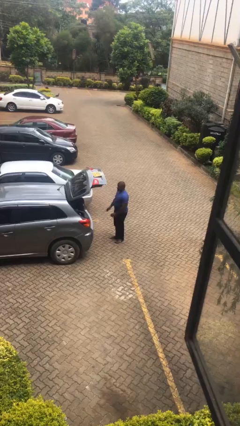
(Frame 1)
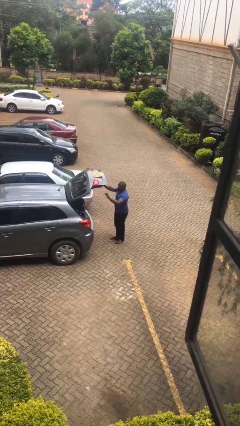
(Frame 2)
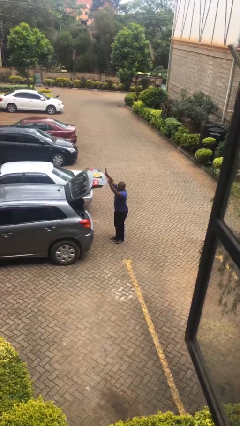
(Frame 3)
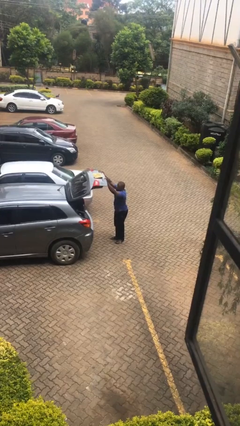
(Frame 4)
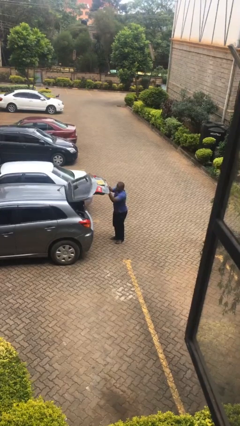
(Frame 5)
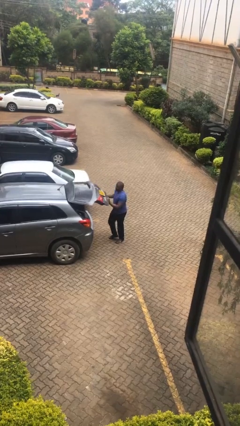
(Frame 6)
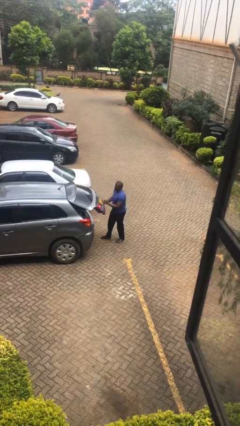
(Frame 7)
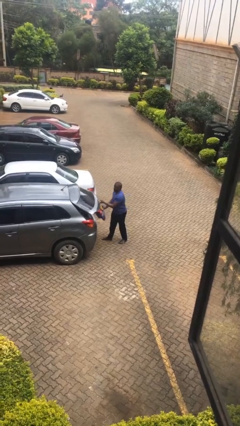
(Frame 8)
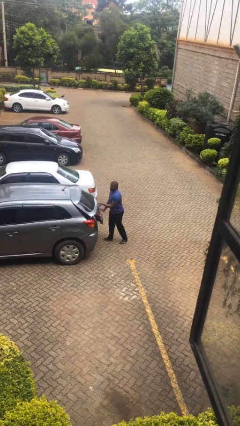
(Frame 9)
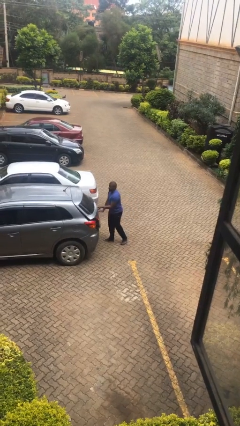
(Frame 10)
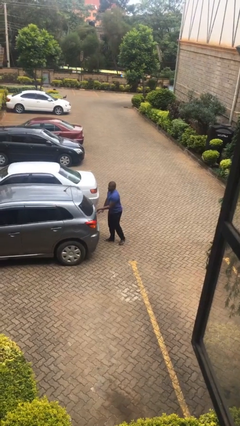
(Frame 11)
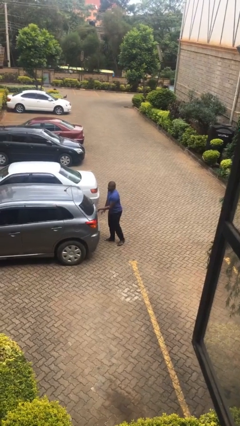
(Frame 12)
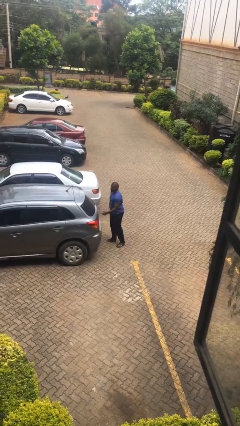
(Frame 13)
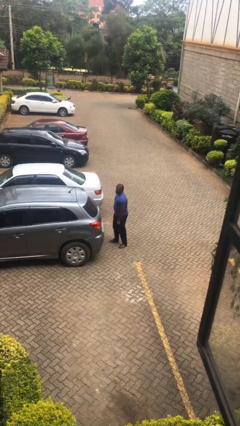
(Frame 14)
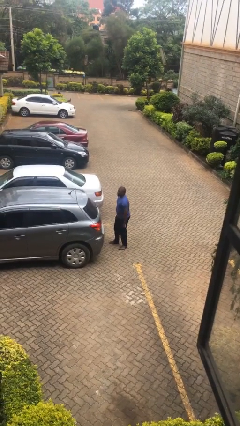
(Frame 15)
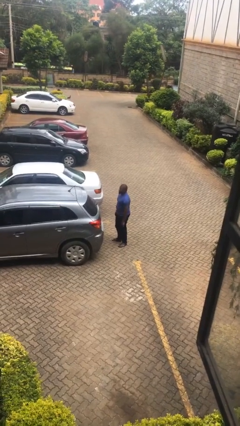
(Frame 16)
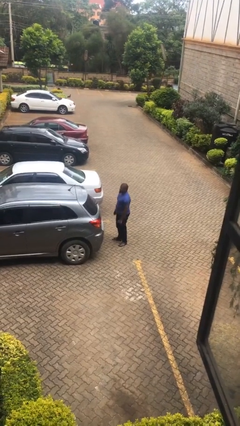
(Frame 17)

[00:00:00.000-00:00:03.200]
person closes car trunk

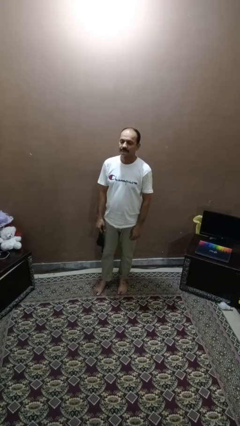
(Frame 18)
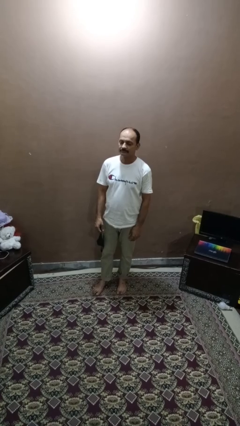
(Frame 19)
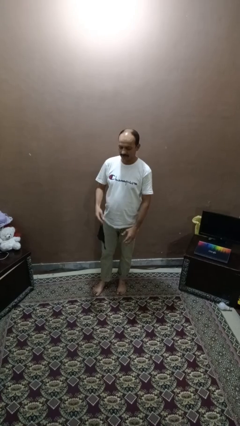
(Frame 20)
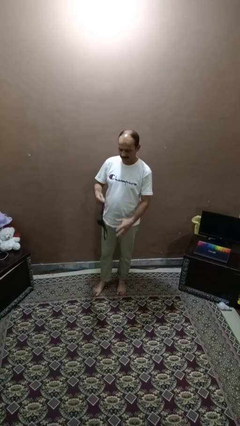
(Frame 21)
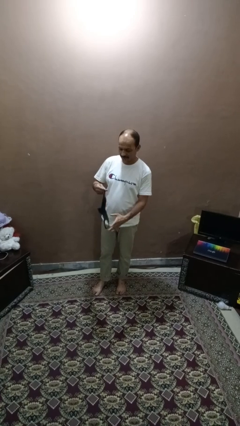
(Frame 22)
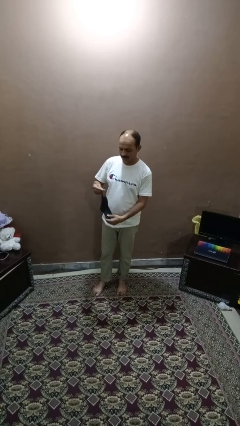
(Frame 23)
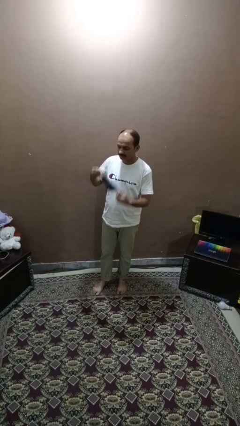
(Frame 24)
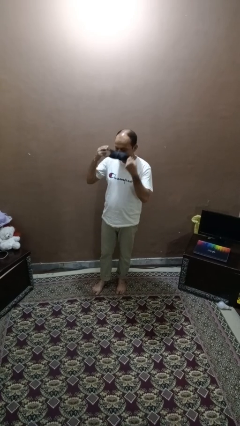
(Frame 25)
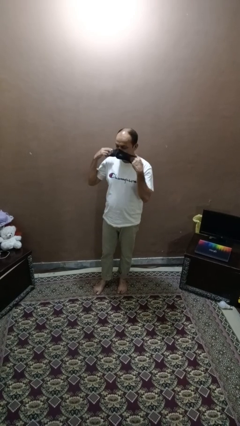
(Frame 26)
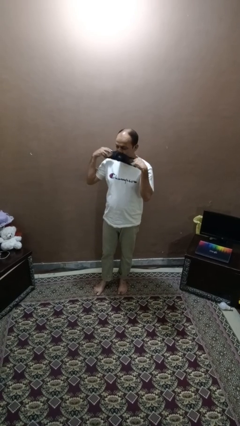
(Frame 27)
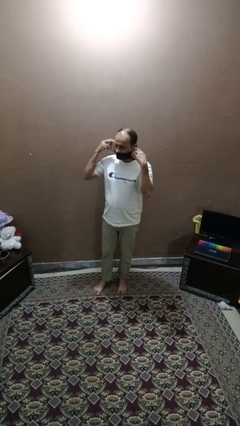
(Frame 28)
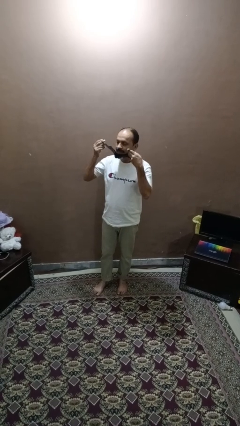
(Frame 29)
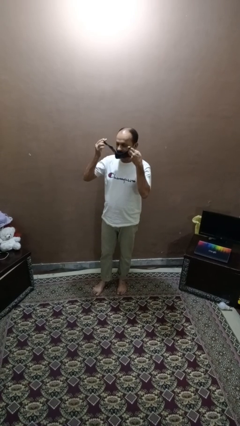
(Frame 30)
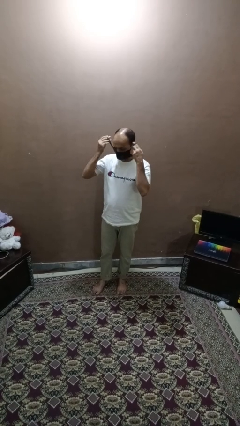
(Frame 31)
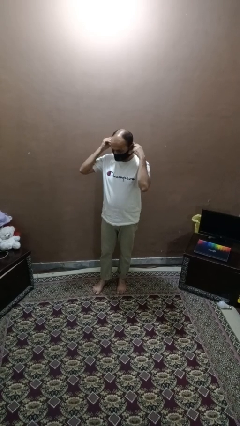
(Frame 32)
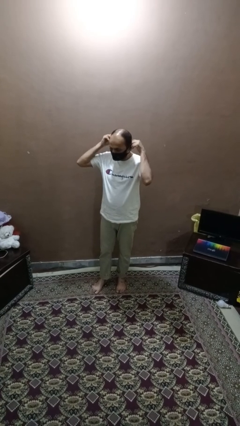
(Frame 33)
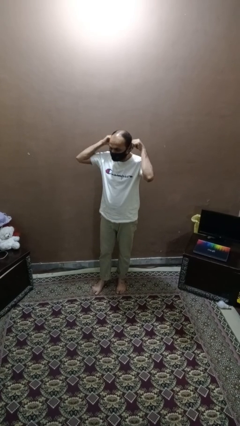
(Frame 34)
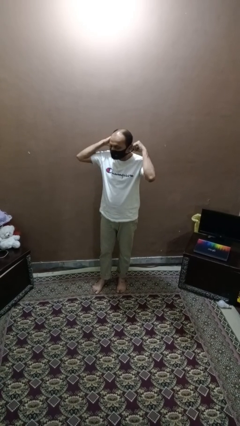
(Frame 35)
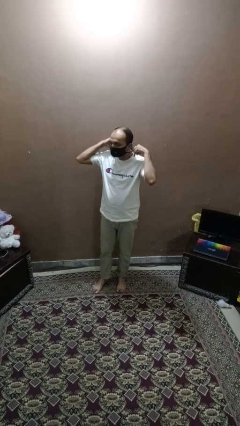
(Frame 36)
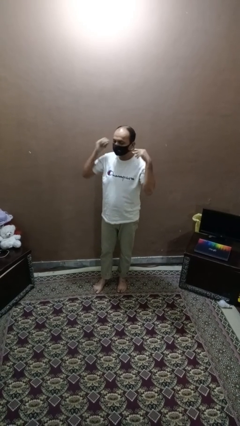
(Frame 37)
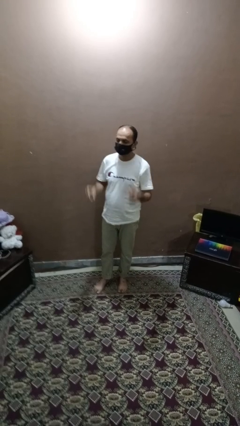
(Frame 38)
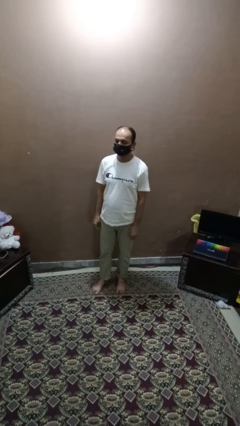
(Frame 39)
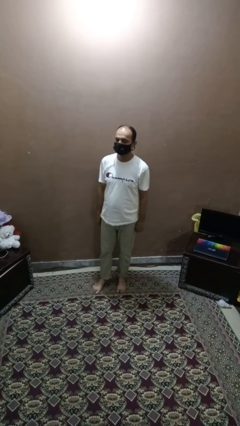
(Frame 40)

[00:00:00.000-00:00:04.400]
person puts on facemask

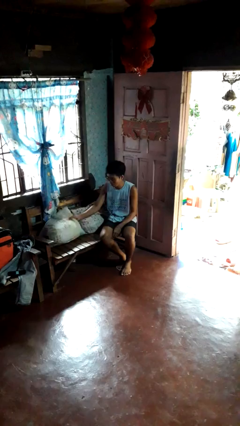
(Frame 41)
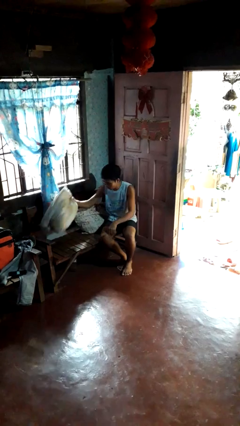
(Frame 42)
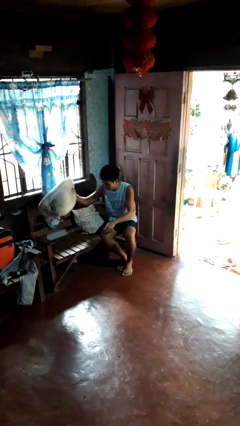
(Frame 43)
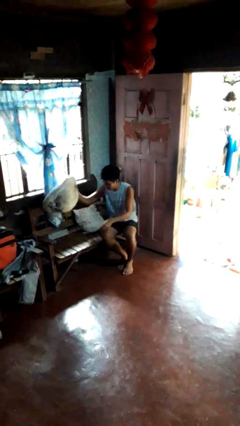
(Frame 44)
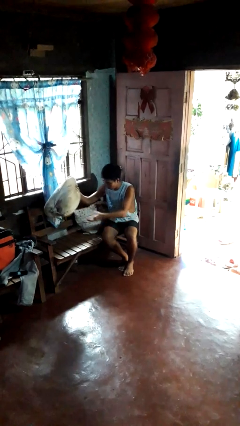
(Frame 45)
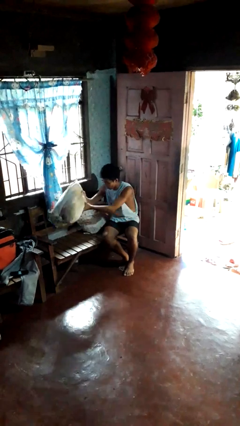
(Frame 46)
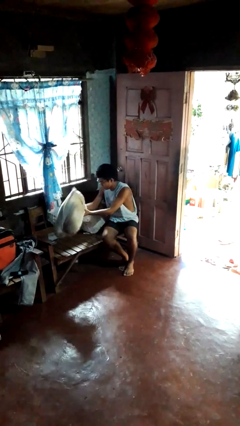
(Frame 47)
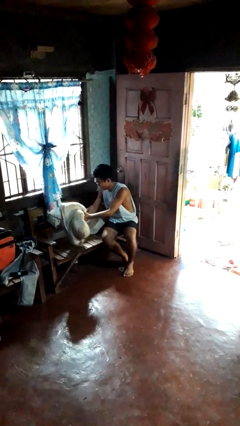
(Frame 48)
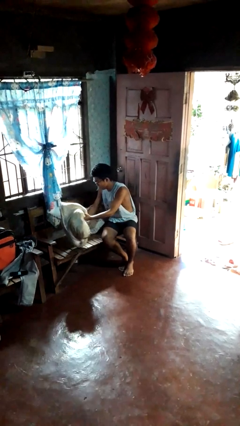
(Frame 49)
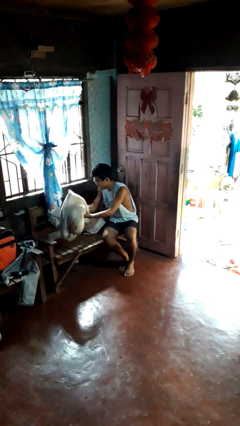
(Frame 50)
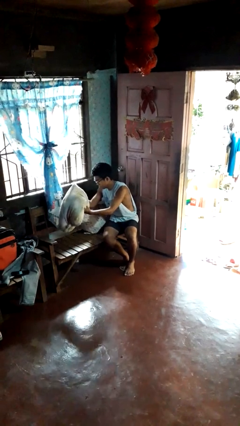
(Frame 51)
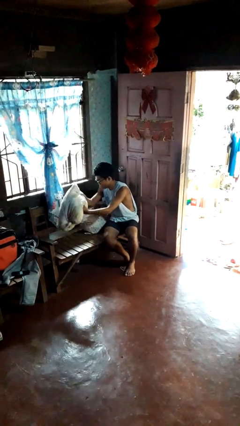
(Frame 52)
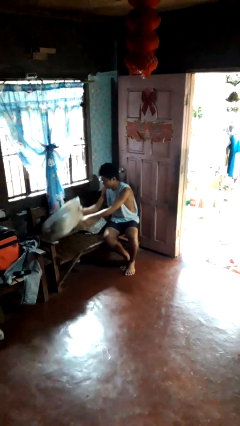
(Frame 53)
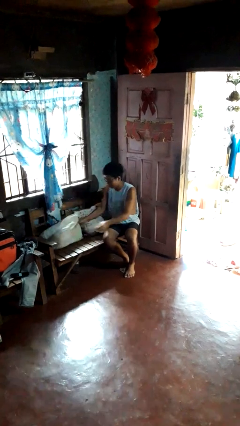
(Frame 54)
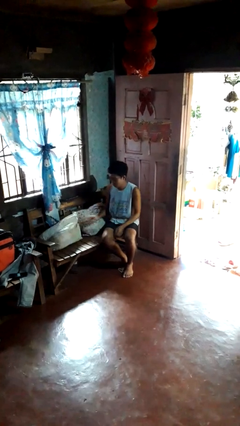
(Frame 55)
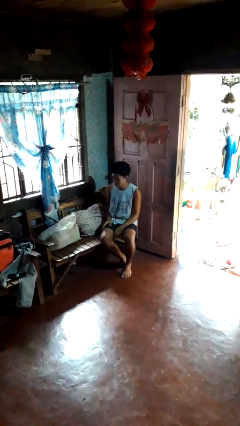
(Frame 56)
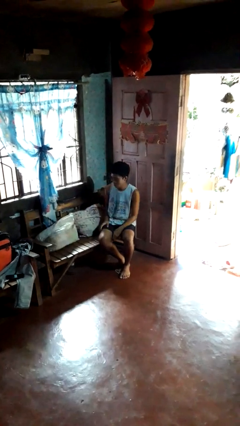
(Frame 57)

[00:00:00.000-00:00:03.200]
person searches in couch

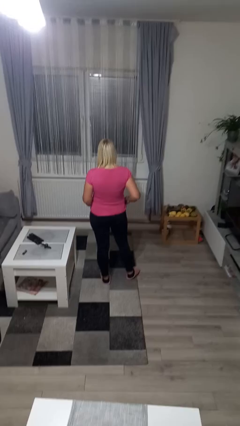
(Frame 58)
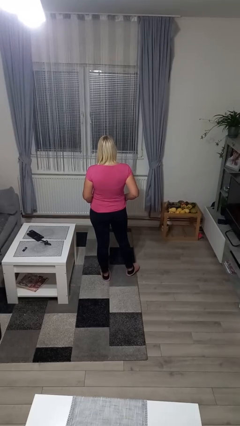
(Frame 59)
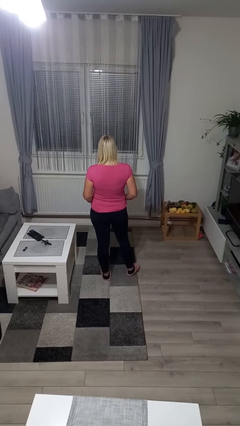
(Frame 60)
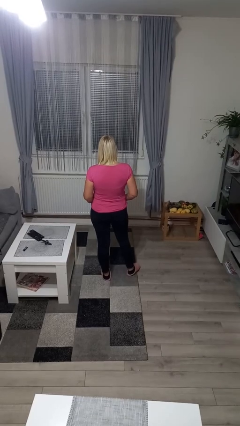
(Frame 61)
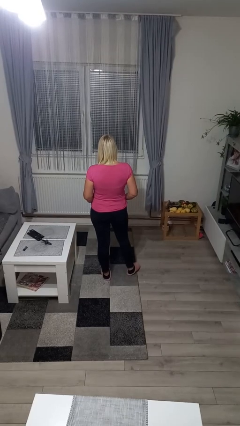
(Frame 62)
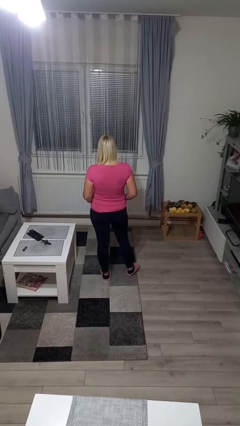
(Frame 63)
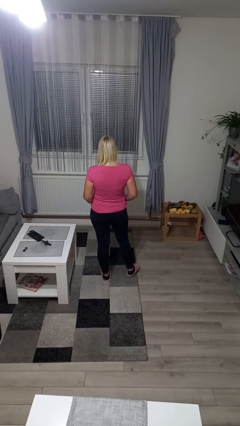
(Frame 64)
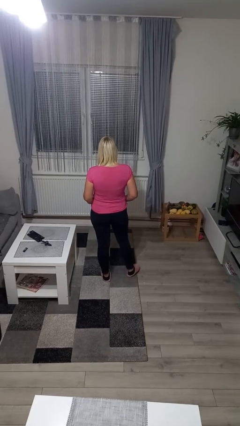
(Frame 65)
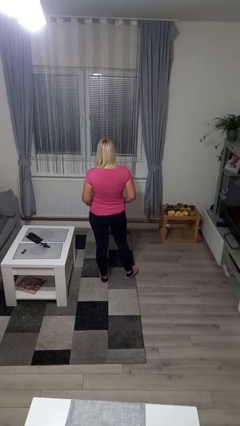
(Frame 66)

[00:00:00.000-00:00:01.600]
person puts hands in back pockets

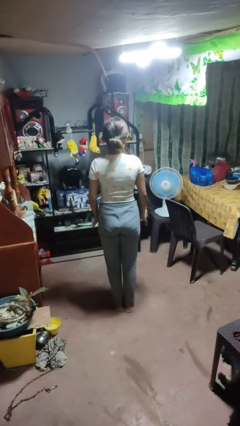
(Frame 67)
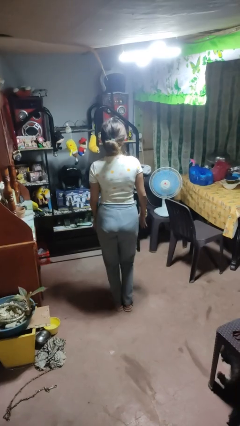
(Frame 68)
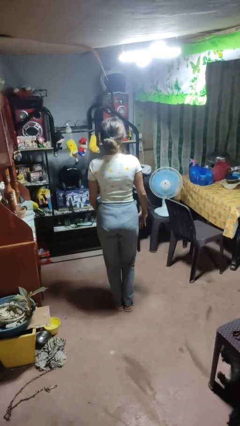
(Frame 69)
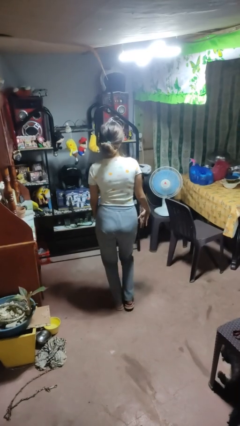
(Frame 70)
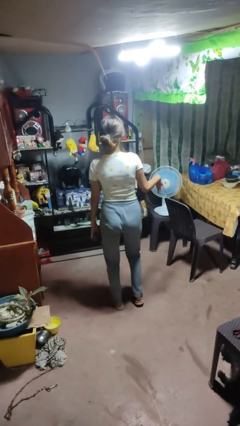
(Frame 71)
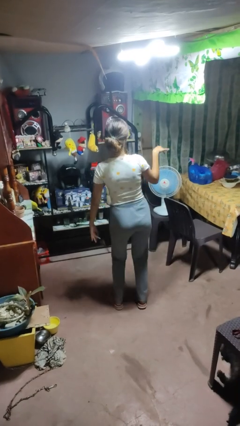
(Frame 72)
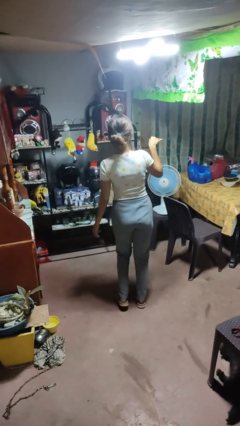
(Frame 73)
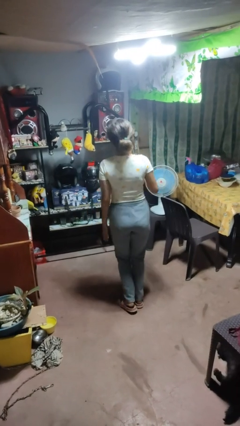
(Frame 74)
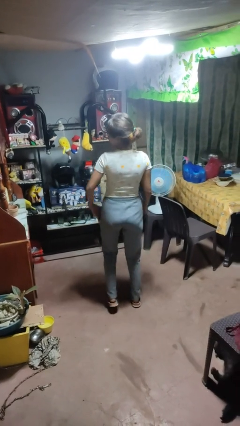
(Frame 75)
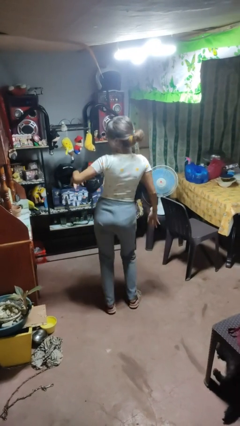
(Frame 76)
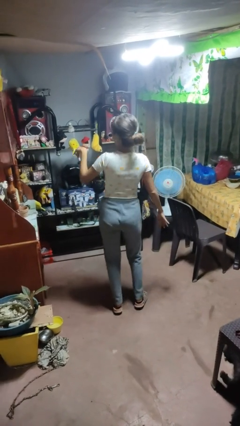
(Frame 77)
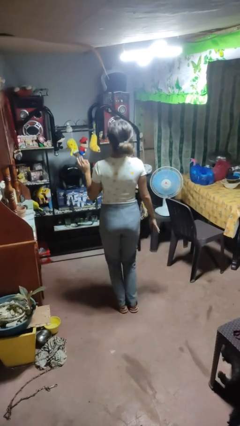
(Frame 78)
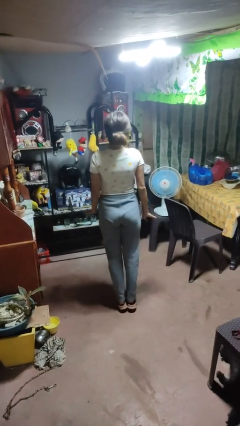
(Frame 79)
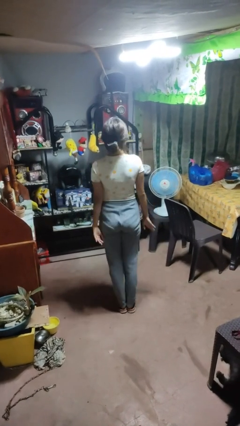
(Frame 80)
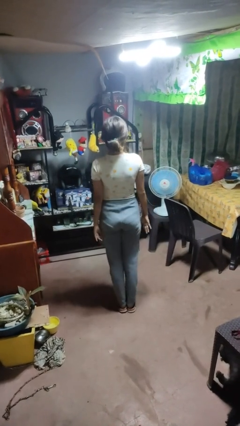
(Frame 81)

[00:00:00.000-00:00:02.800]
person dances in place

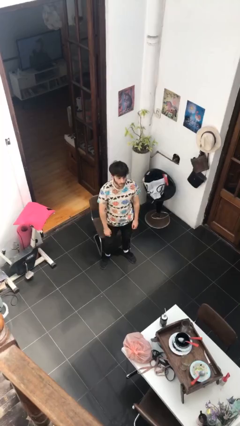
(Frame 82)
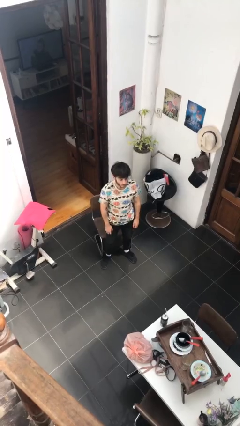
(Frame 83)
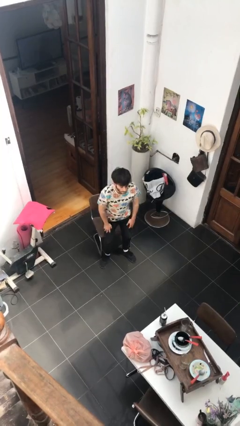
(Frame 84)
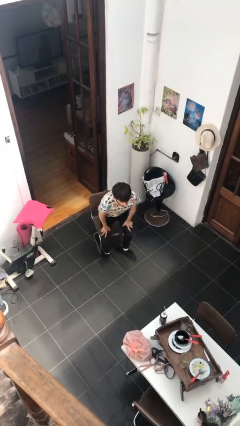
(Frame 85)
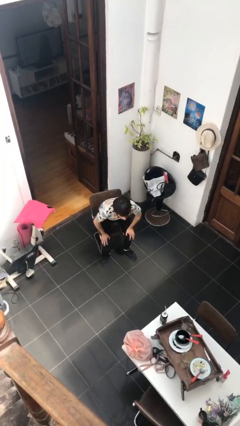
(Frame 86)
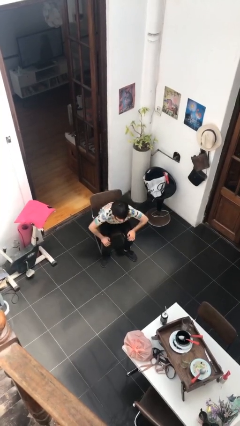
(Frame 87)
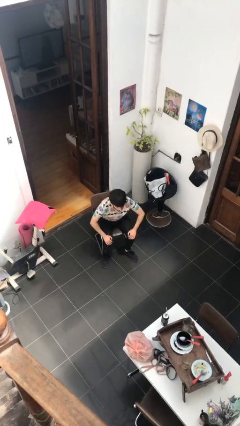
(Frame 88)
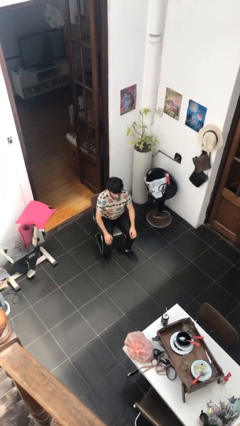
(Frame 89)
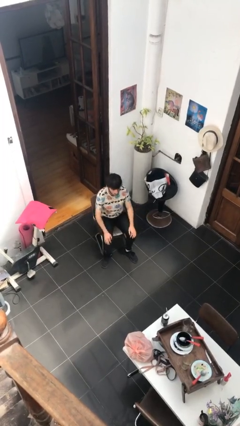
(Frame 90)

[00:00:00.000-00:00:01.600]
person sits down

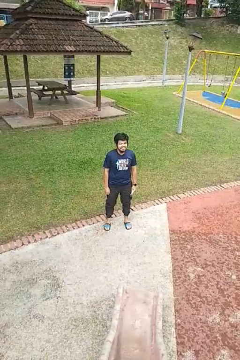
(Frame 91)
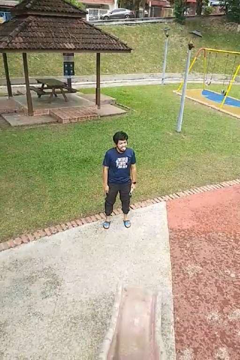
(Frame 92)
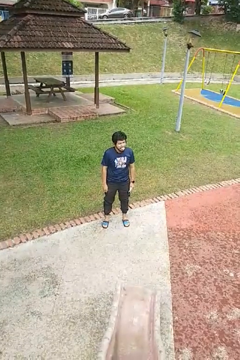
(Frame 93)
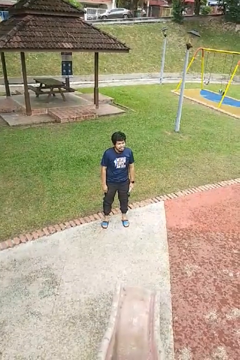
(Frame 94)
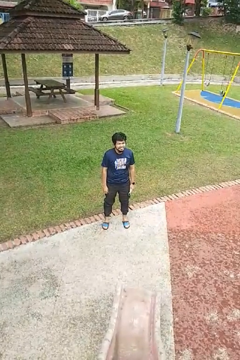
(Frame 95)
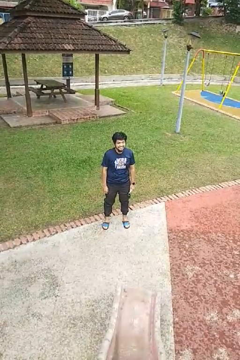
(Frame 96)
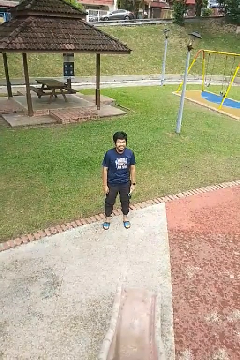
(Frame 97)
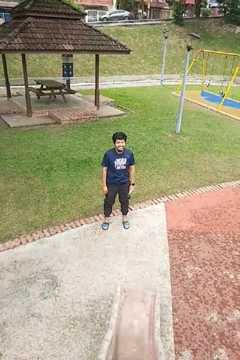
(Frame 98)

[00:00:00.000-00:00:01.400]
person sticks out tongue
